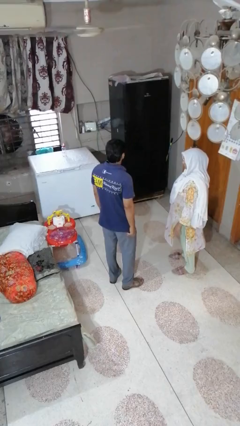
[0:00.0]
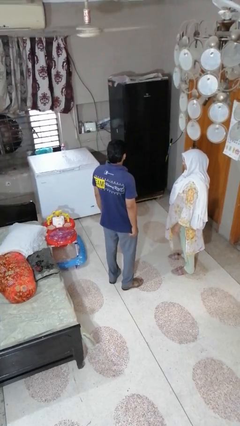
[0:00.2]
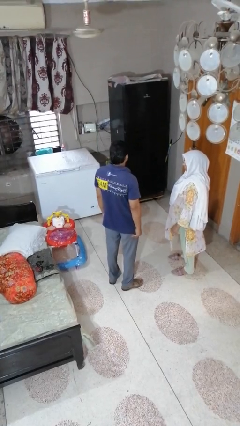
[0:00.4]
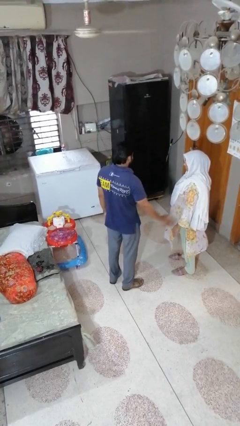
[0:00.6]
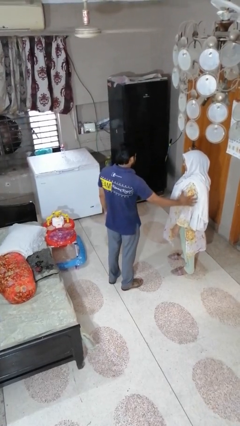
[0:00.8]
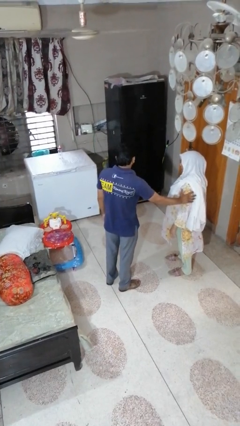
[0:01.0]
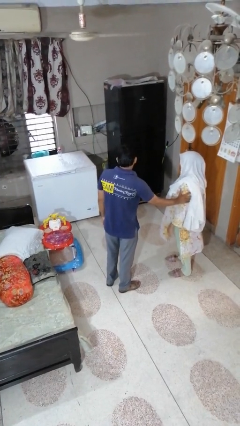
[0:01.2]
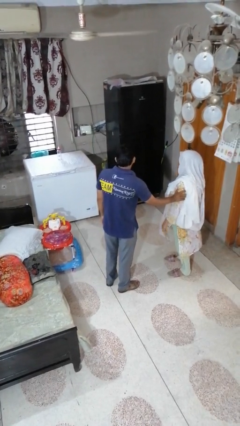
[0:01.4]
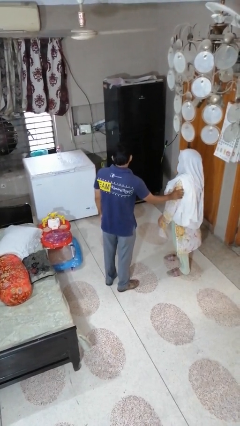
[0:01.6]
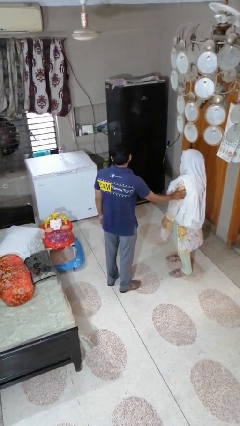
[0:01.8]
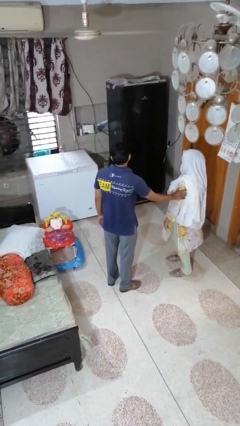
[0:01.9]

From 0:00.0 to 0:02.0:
person grabs person by bicep

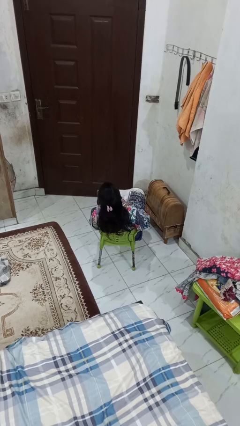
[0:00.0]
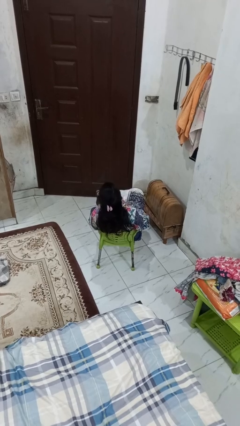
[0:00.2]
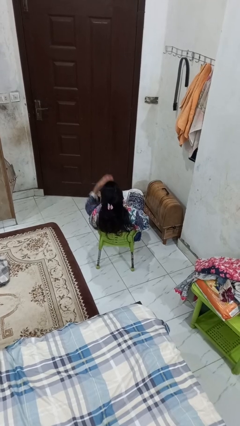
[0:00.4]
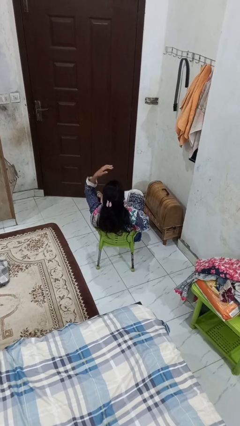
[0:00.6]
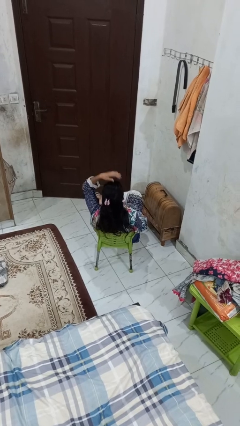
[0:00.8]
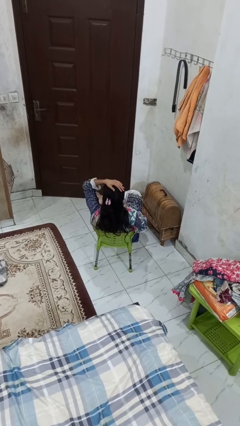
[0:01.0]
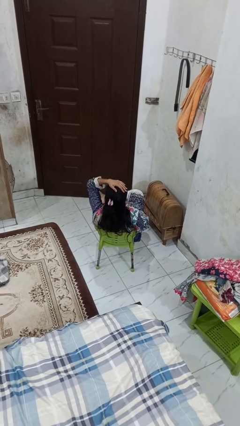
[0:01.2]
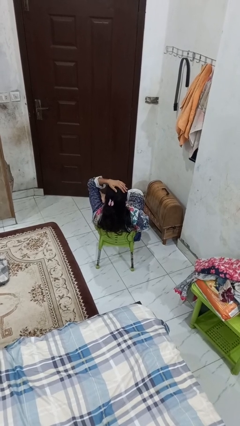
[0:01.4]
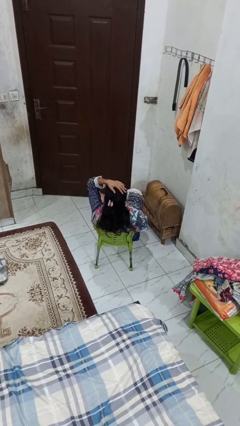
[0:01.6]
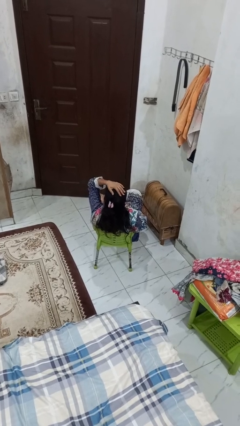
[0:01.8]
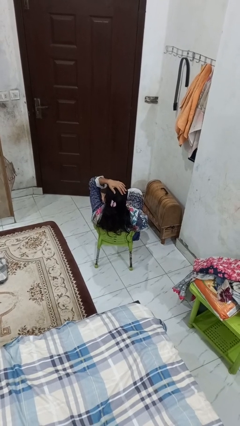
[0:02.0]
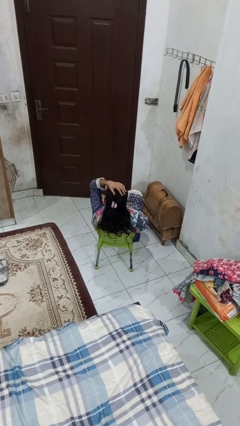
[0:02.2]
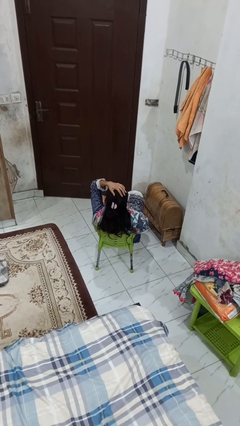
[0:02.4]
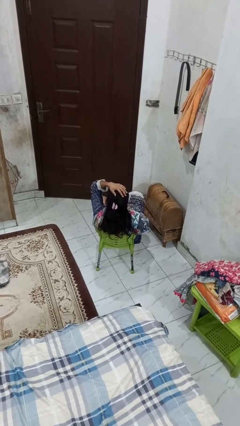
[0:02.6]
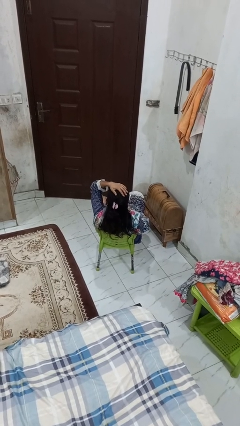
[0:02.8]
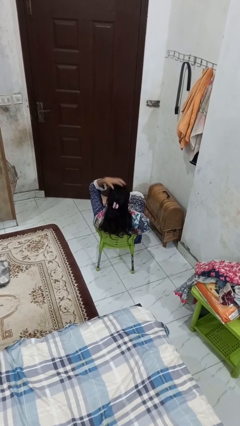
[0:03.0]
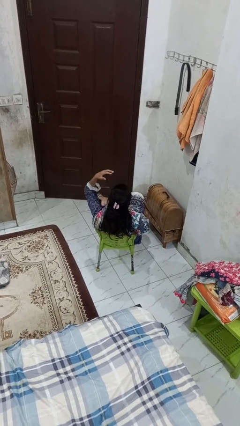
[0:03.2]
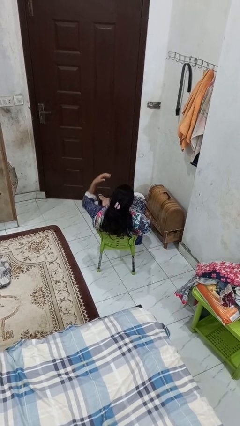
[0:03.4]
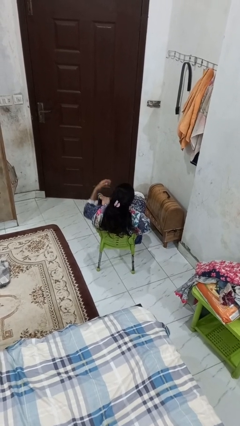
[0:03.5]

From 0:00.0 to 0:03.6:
person pats head

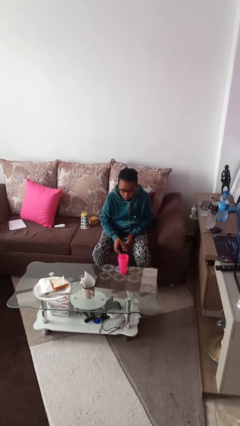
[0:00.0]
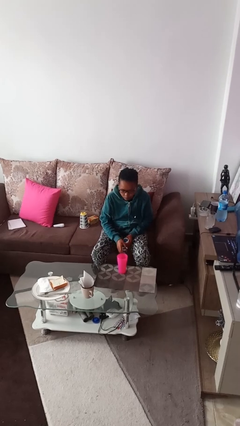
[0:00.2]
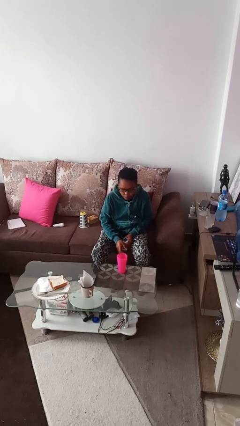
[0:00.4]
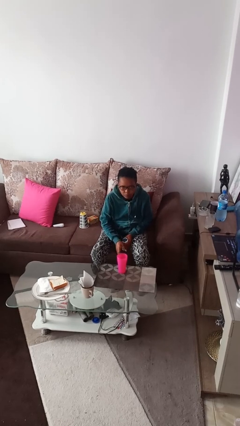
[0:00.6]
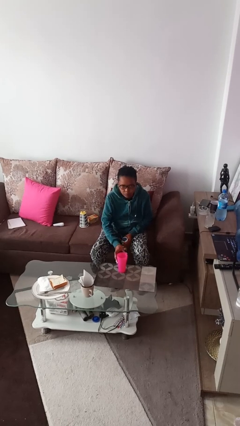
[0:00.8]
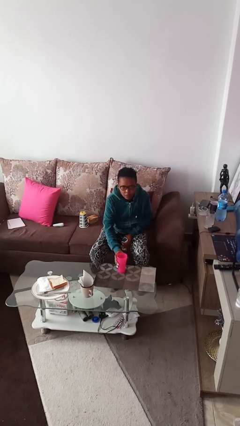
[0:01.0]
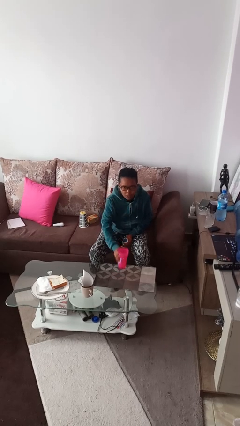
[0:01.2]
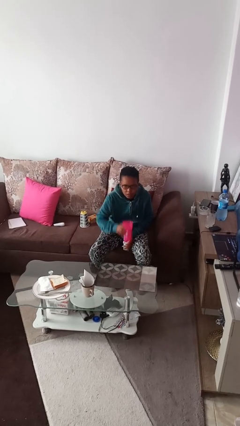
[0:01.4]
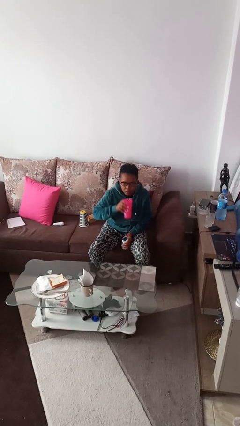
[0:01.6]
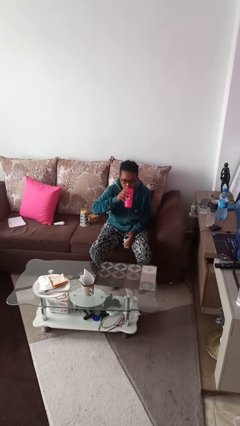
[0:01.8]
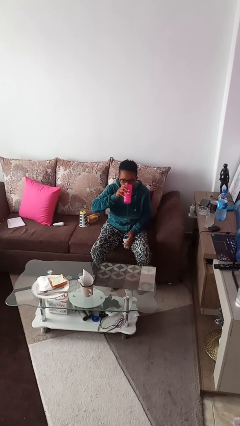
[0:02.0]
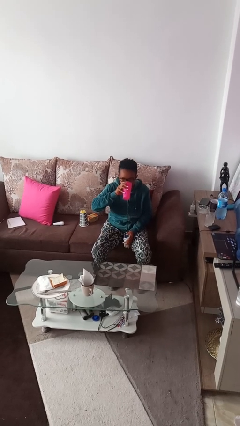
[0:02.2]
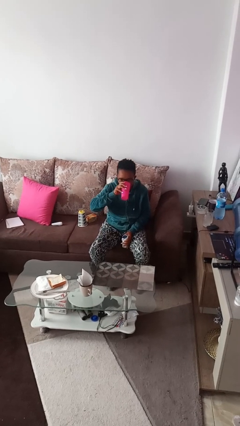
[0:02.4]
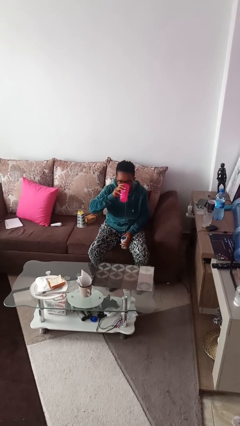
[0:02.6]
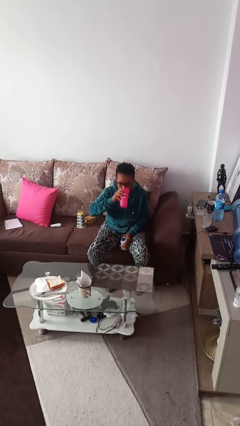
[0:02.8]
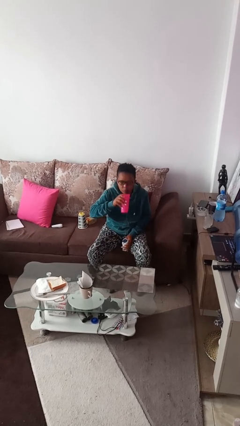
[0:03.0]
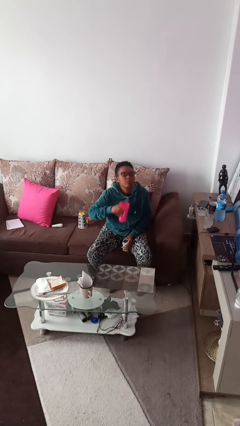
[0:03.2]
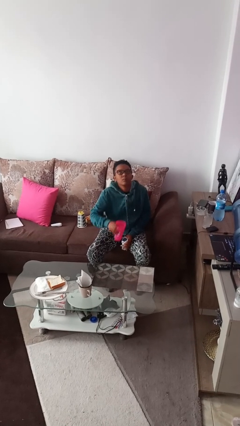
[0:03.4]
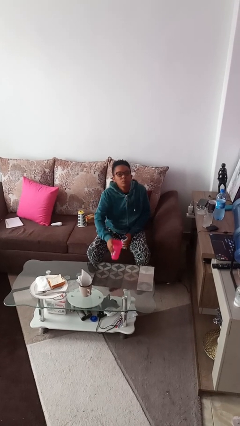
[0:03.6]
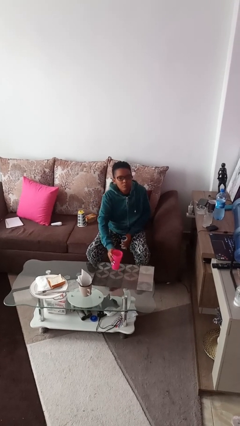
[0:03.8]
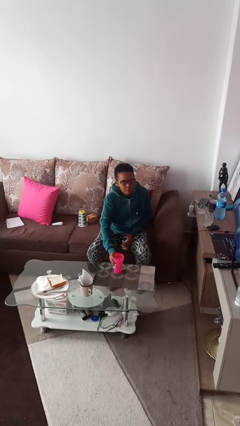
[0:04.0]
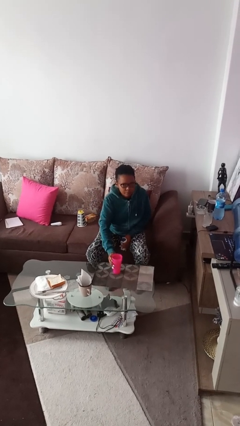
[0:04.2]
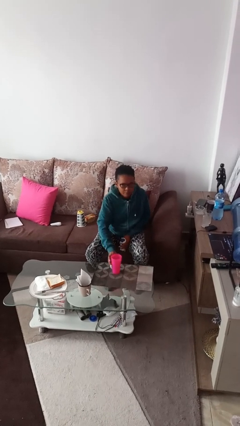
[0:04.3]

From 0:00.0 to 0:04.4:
person drinks from cup

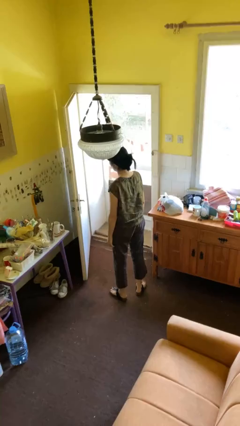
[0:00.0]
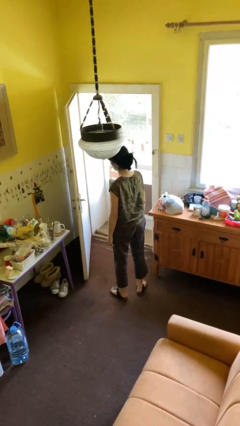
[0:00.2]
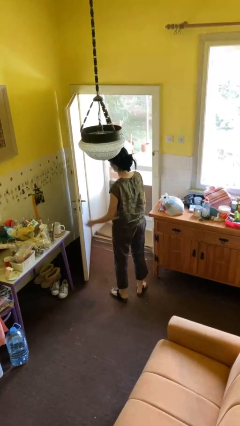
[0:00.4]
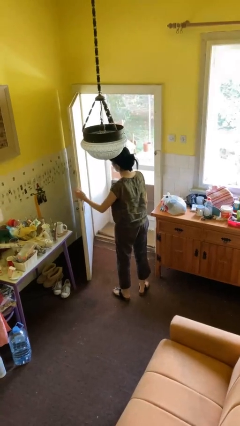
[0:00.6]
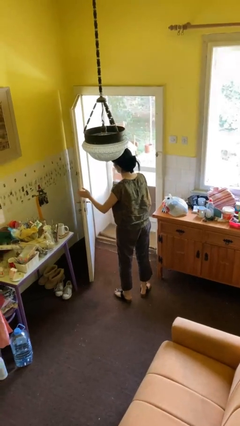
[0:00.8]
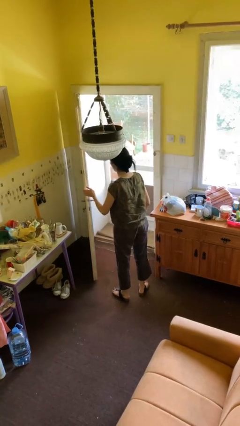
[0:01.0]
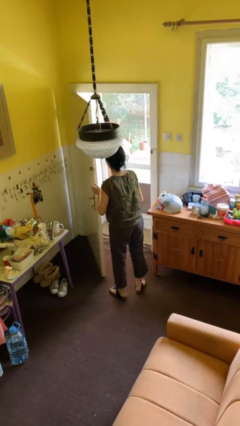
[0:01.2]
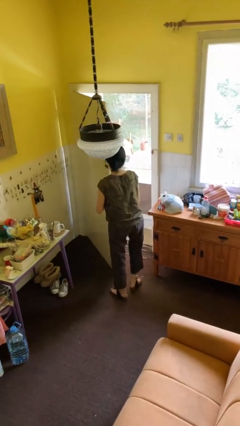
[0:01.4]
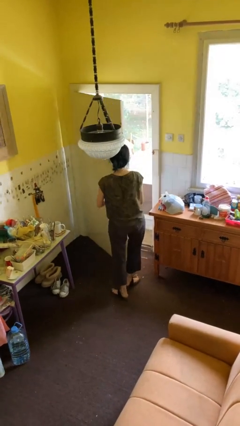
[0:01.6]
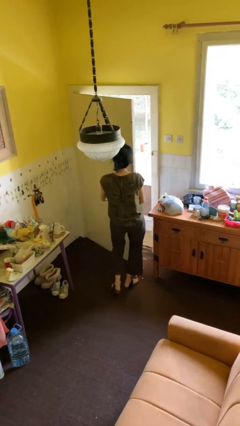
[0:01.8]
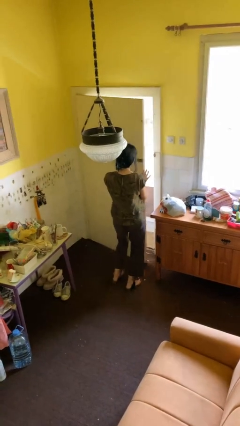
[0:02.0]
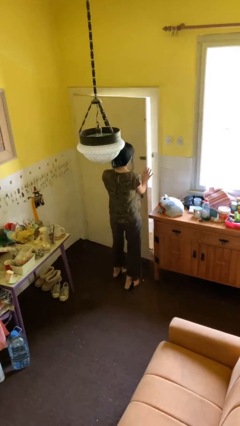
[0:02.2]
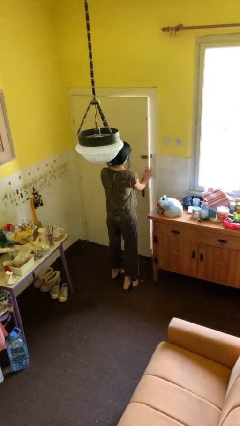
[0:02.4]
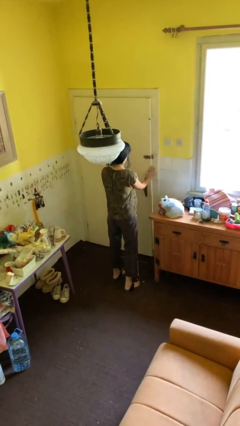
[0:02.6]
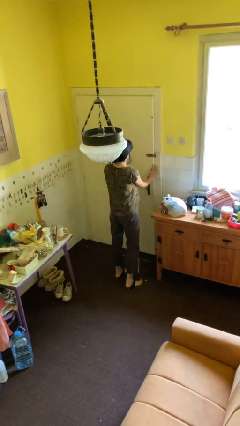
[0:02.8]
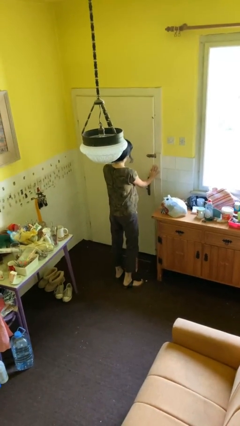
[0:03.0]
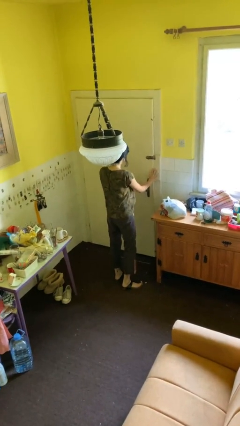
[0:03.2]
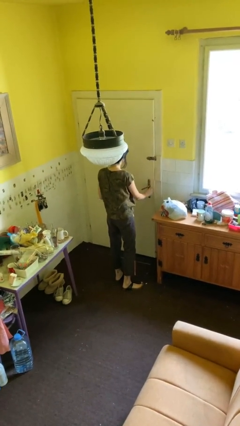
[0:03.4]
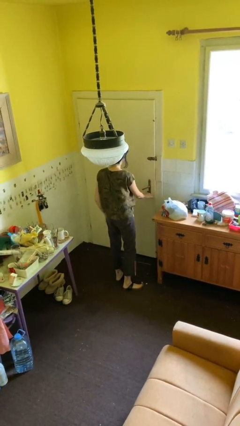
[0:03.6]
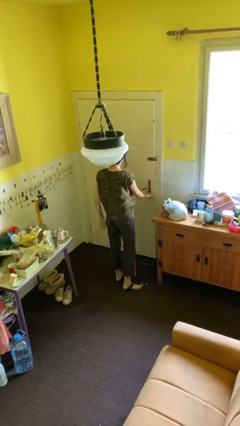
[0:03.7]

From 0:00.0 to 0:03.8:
person closes facility door

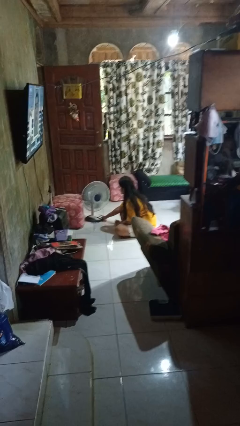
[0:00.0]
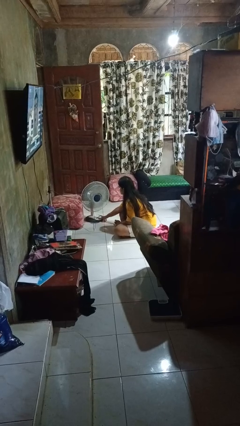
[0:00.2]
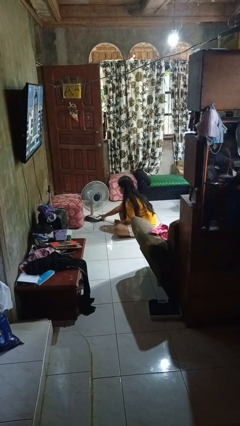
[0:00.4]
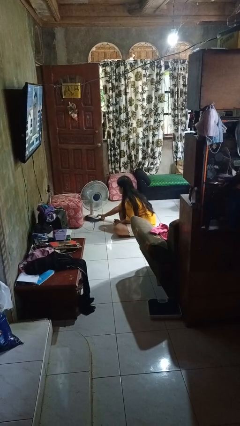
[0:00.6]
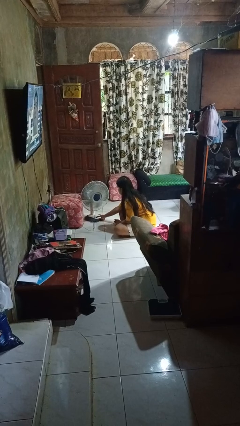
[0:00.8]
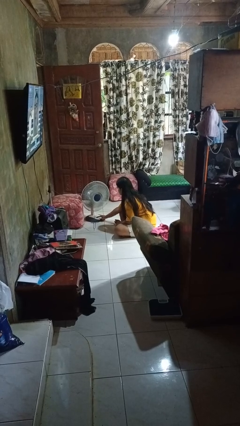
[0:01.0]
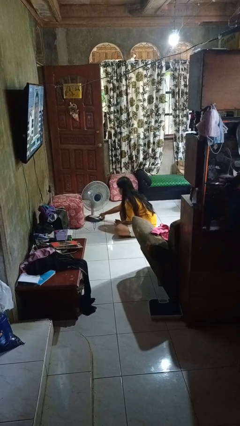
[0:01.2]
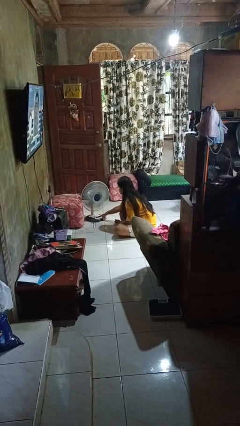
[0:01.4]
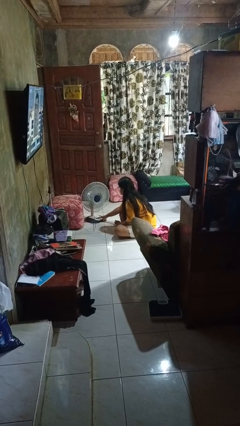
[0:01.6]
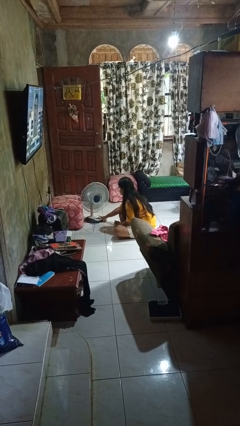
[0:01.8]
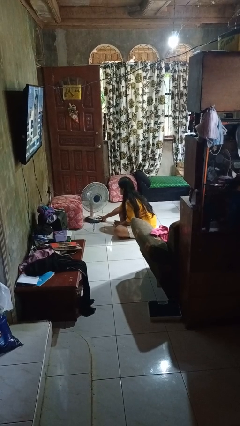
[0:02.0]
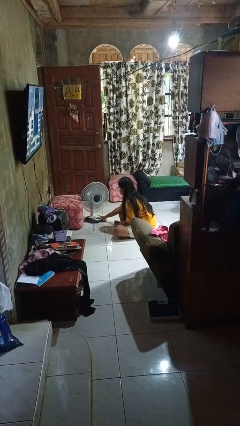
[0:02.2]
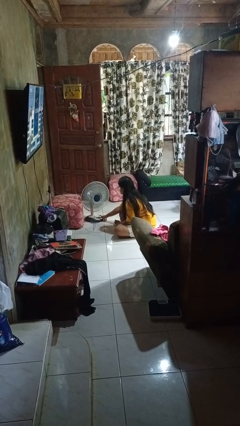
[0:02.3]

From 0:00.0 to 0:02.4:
person turns on fan

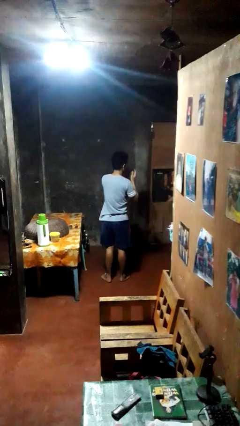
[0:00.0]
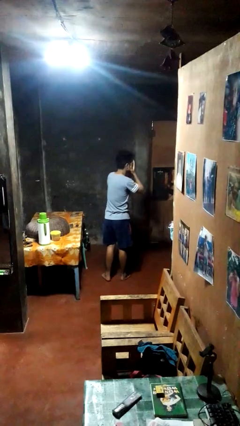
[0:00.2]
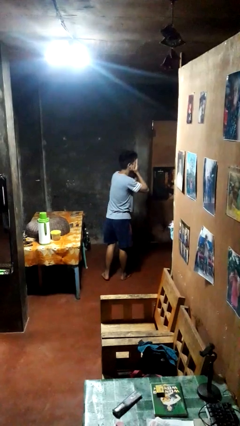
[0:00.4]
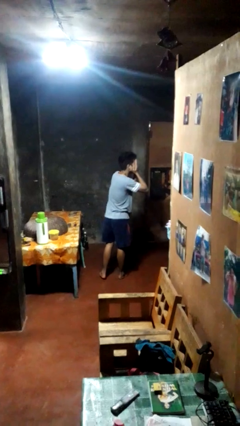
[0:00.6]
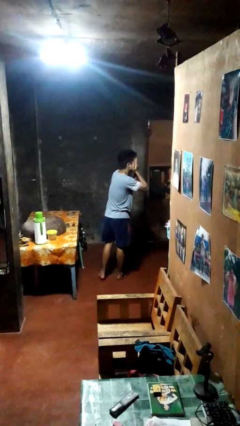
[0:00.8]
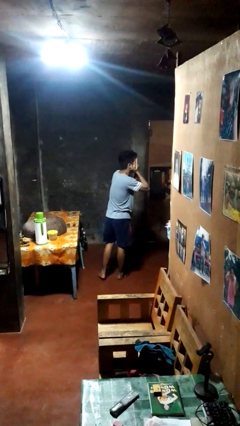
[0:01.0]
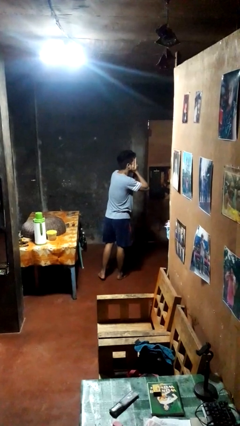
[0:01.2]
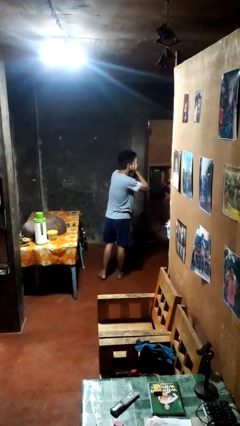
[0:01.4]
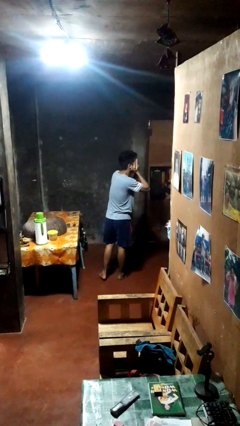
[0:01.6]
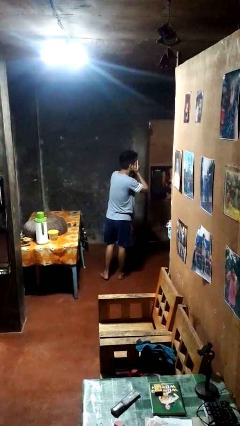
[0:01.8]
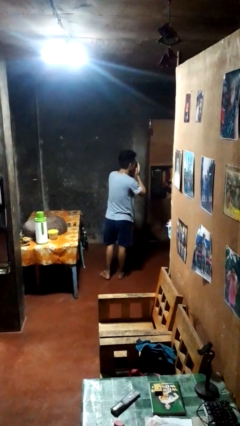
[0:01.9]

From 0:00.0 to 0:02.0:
person covers face with hands
